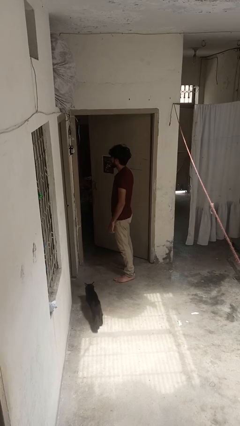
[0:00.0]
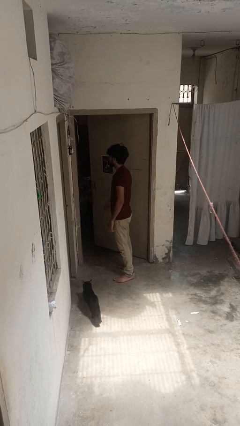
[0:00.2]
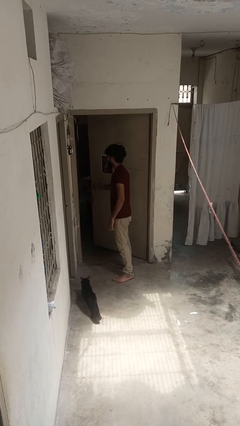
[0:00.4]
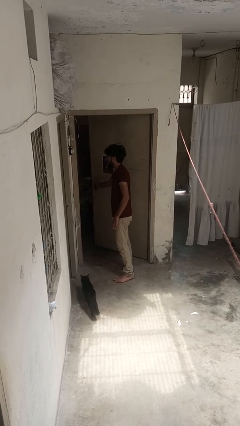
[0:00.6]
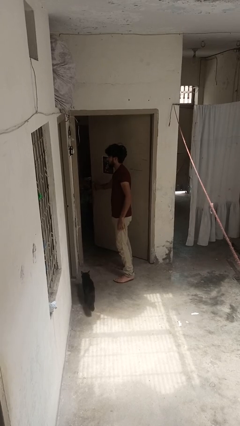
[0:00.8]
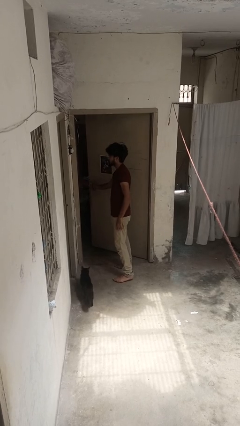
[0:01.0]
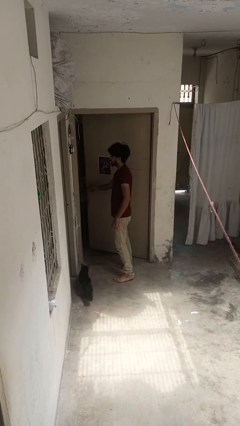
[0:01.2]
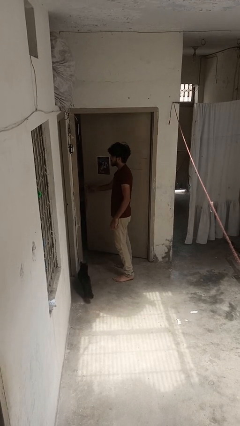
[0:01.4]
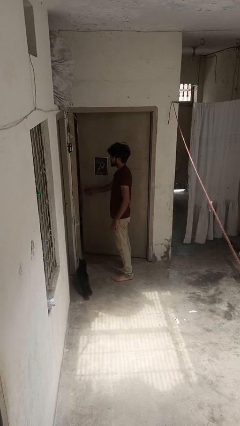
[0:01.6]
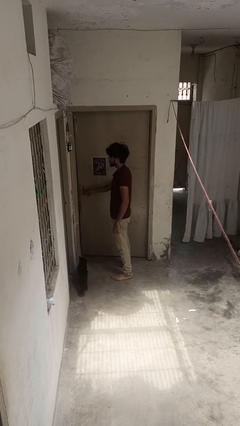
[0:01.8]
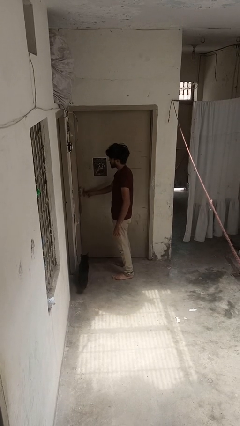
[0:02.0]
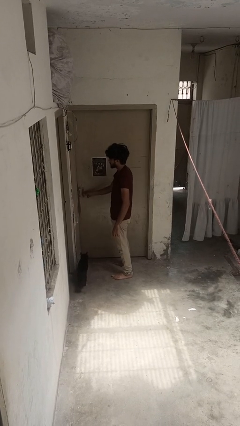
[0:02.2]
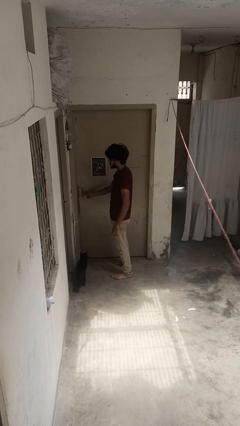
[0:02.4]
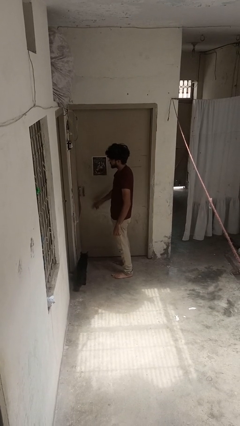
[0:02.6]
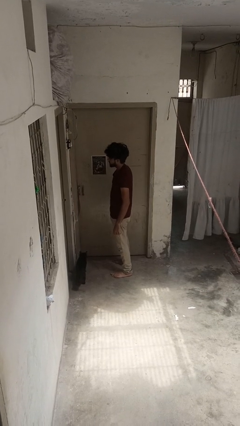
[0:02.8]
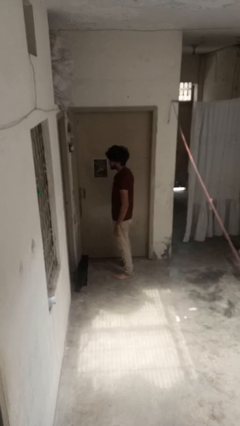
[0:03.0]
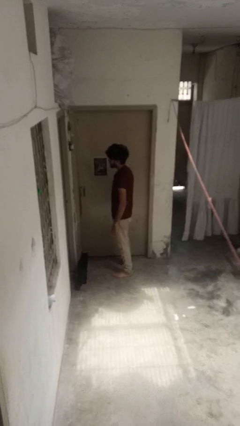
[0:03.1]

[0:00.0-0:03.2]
person closes door with hip

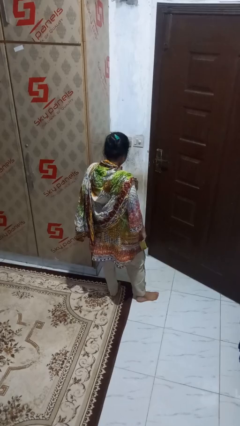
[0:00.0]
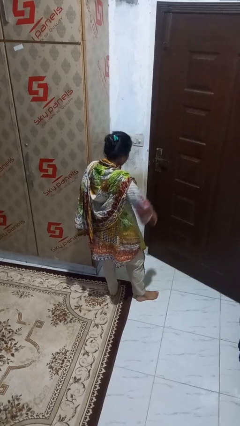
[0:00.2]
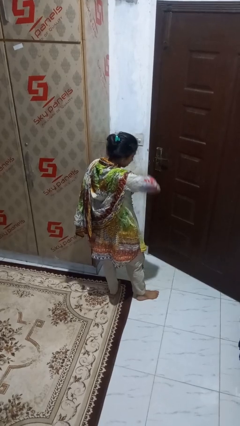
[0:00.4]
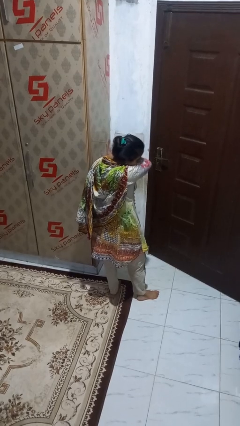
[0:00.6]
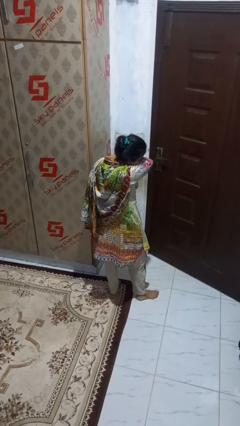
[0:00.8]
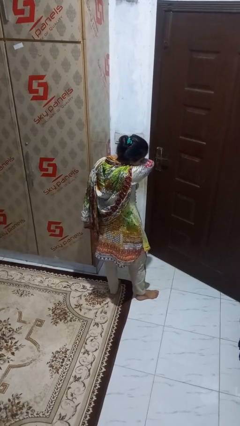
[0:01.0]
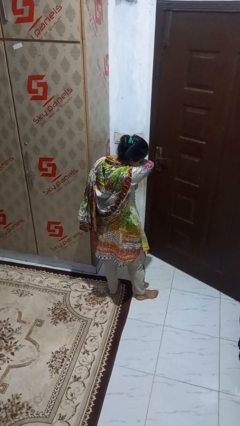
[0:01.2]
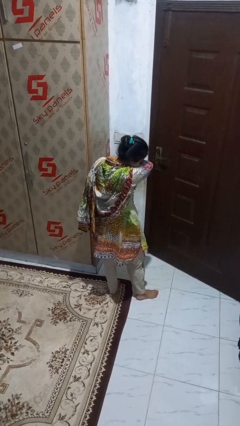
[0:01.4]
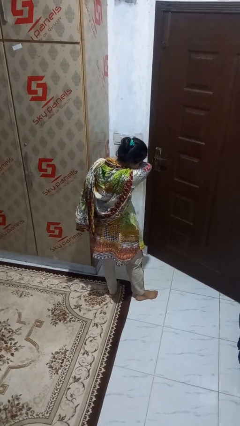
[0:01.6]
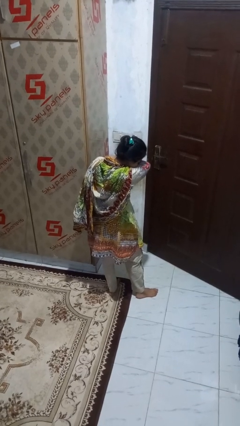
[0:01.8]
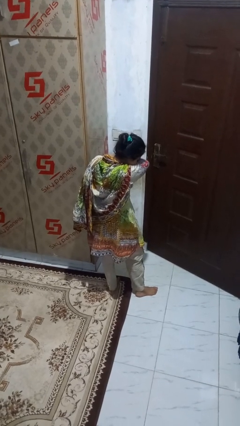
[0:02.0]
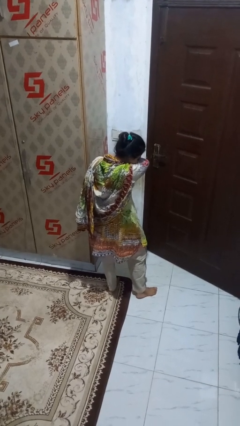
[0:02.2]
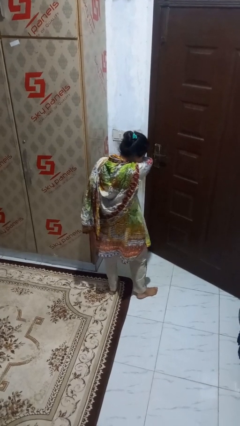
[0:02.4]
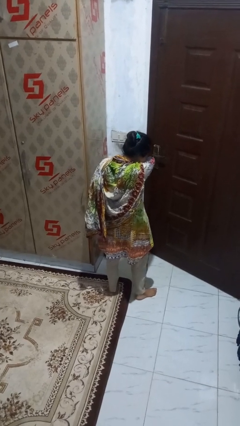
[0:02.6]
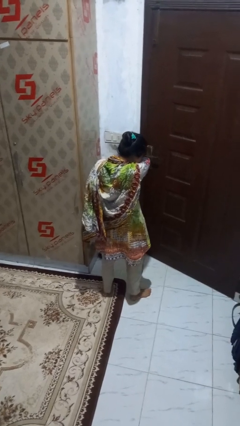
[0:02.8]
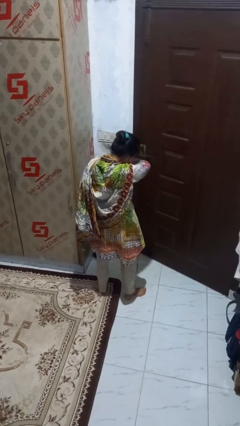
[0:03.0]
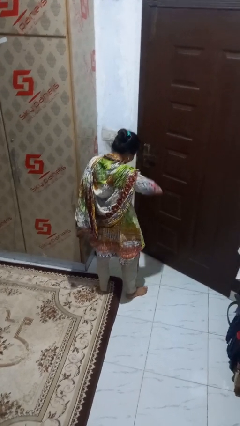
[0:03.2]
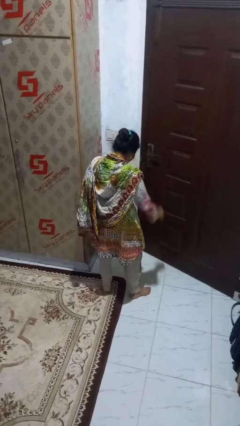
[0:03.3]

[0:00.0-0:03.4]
person sneezes into arm

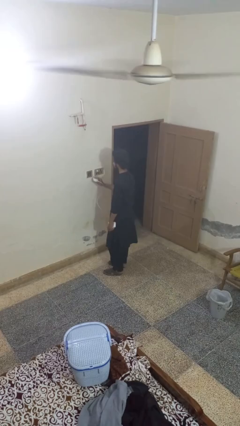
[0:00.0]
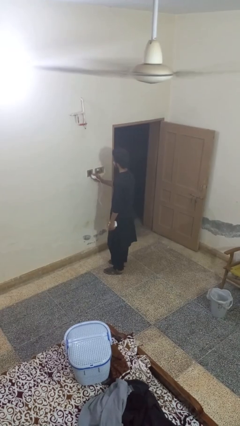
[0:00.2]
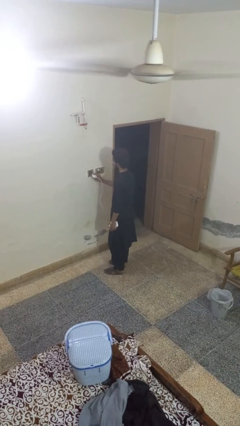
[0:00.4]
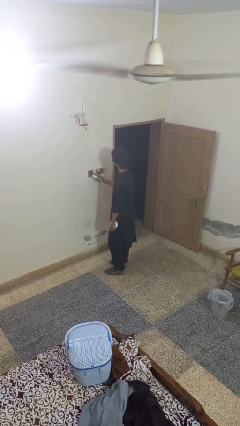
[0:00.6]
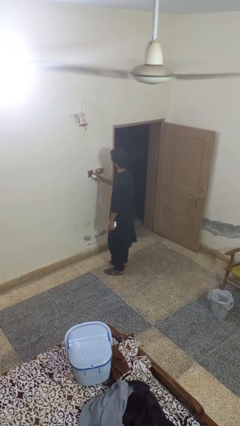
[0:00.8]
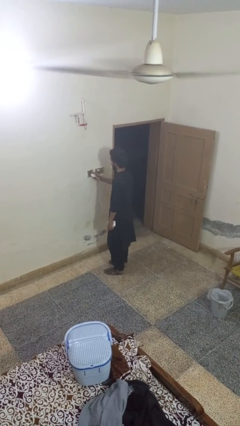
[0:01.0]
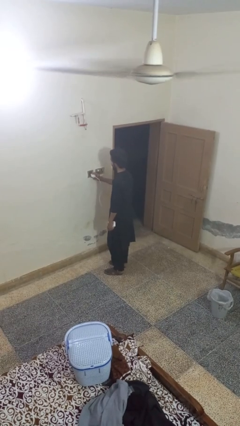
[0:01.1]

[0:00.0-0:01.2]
person plugs into electrical socket

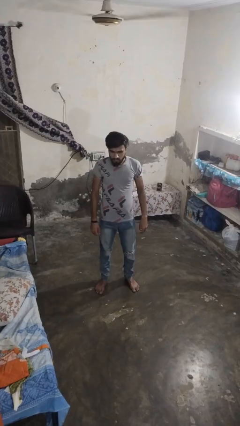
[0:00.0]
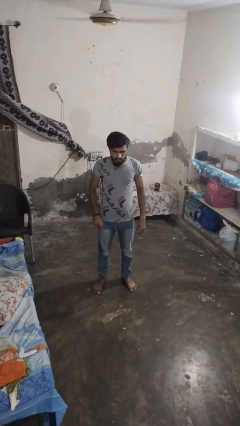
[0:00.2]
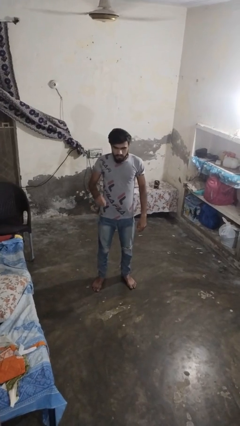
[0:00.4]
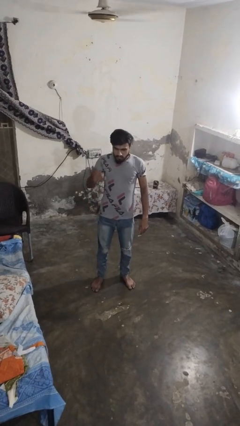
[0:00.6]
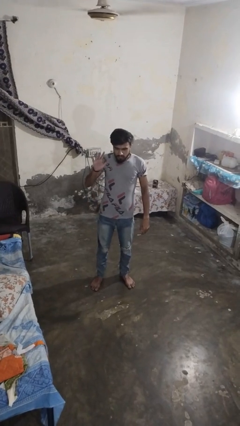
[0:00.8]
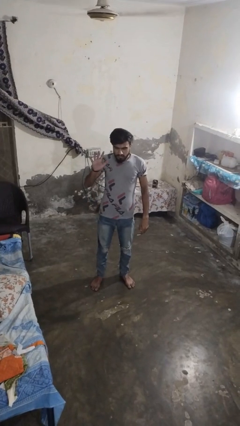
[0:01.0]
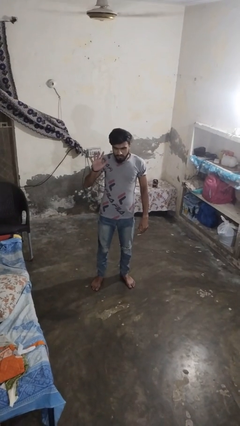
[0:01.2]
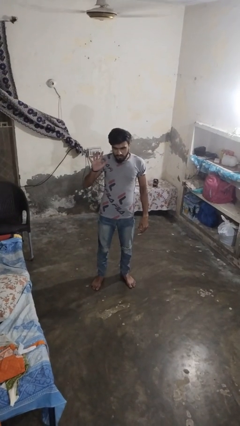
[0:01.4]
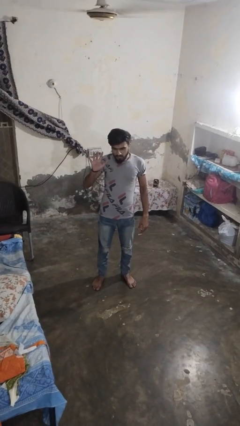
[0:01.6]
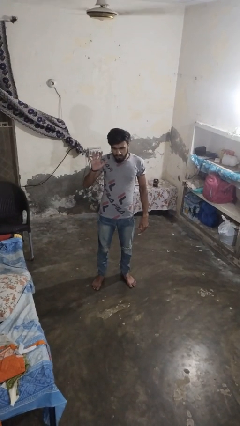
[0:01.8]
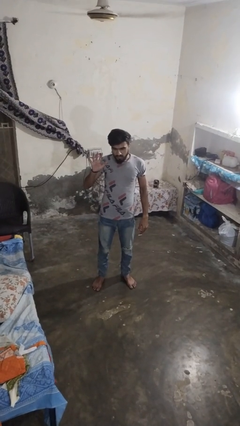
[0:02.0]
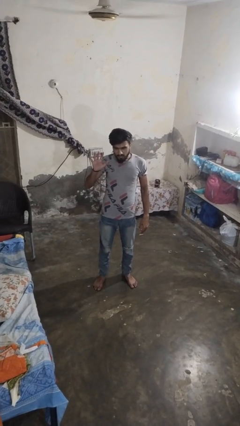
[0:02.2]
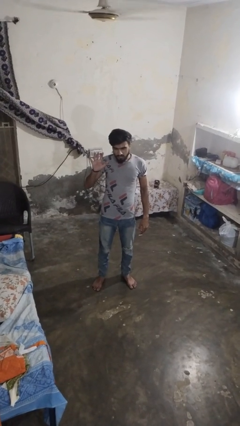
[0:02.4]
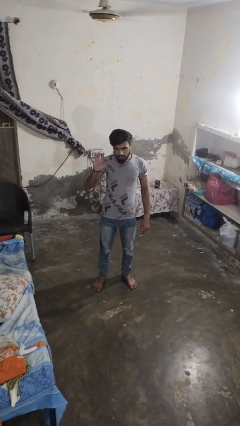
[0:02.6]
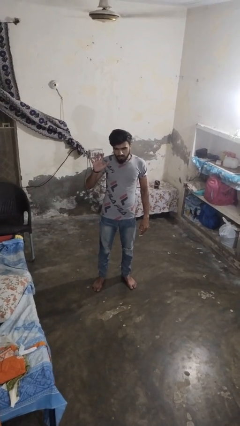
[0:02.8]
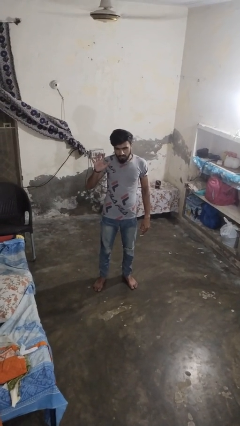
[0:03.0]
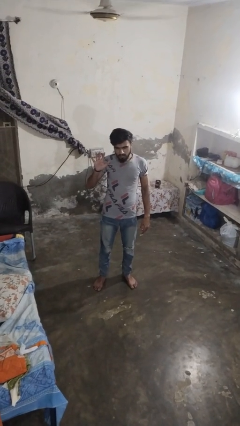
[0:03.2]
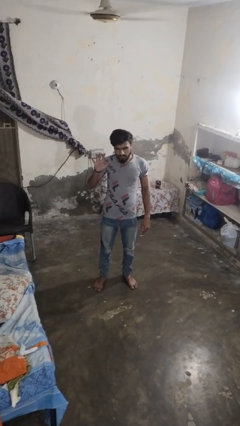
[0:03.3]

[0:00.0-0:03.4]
person gestures number five

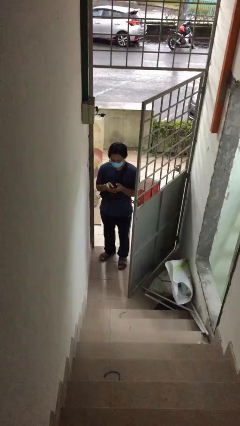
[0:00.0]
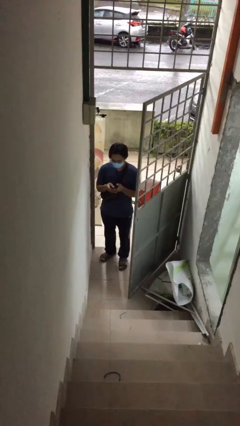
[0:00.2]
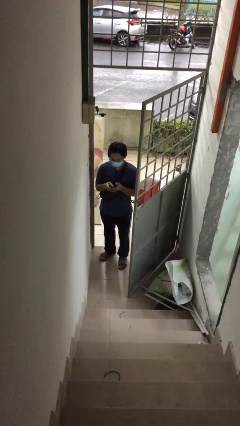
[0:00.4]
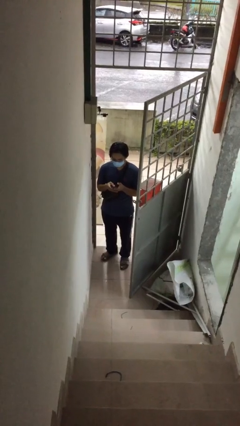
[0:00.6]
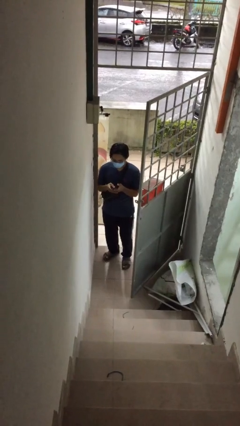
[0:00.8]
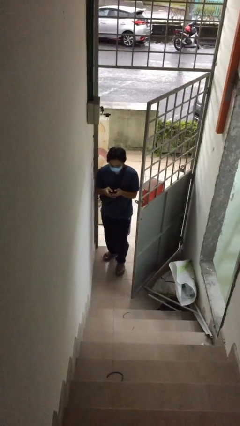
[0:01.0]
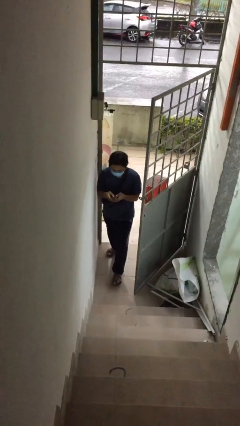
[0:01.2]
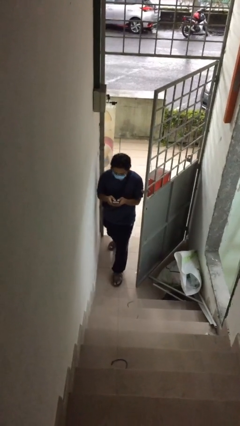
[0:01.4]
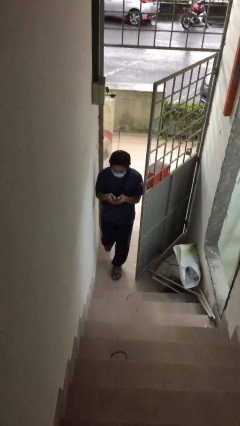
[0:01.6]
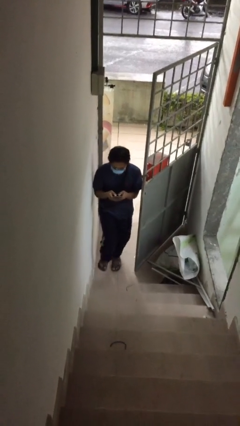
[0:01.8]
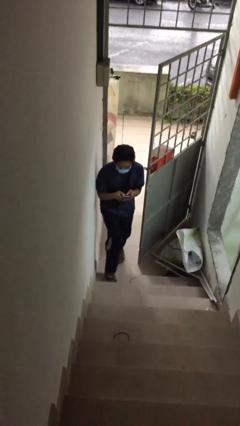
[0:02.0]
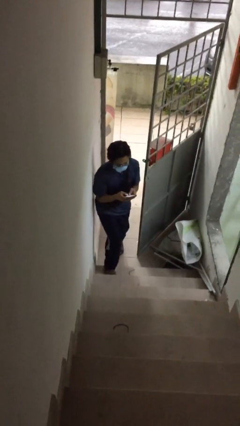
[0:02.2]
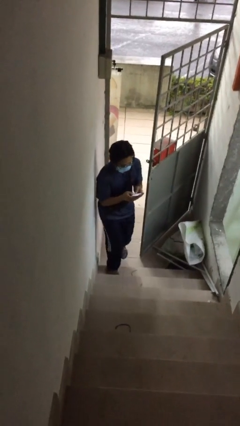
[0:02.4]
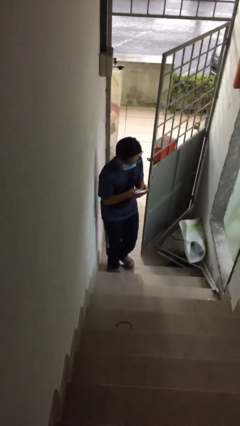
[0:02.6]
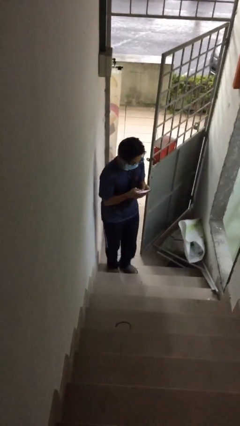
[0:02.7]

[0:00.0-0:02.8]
person enters scene through structure

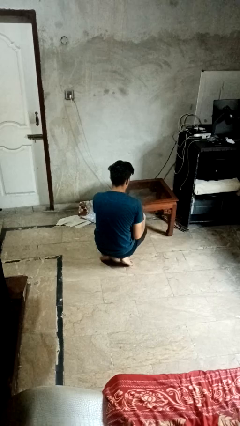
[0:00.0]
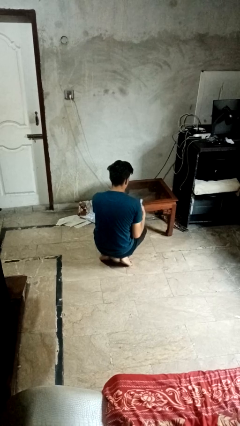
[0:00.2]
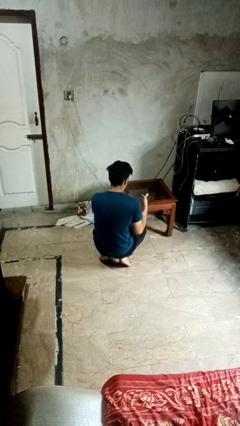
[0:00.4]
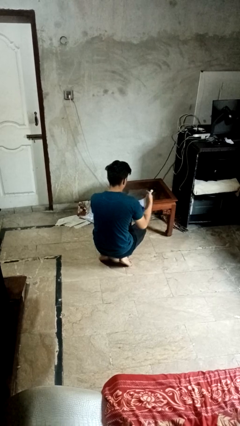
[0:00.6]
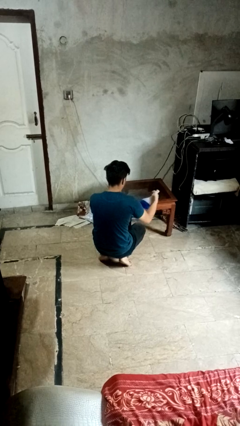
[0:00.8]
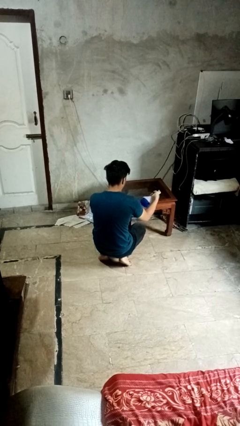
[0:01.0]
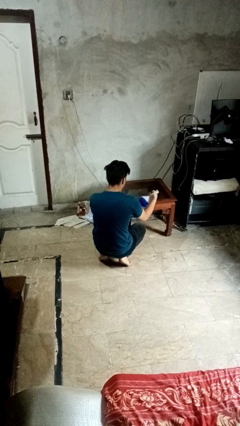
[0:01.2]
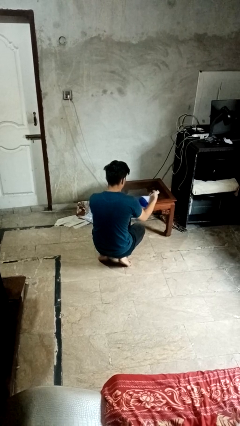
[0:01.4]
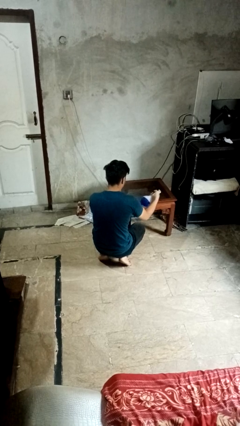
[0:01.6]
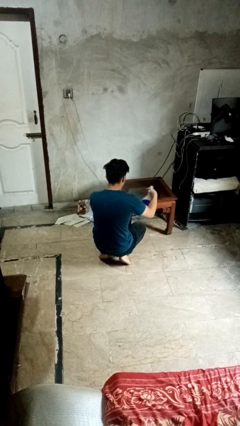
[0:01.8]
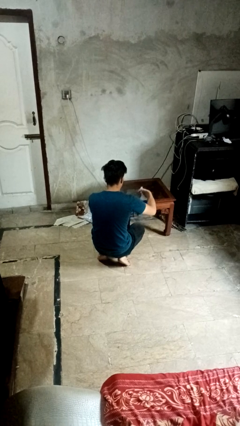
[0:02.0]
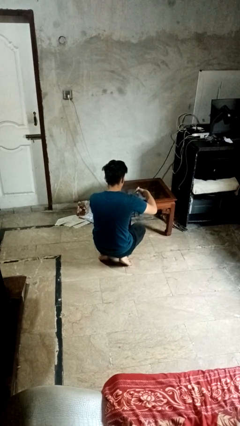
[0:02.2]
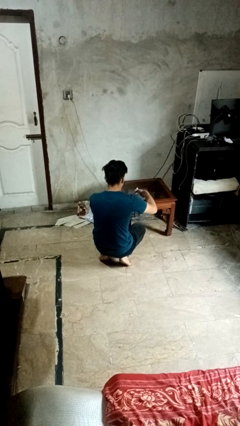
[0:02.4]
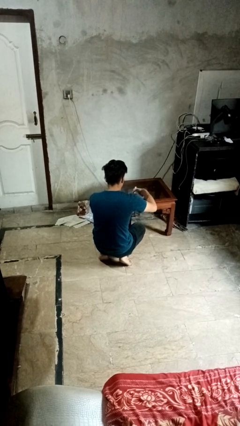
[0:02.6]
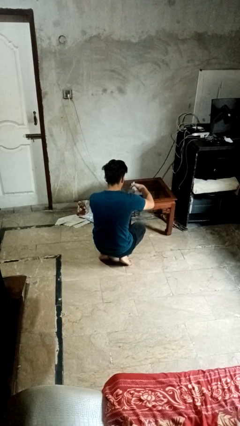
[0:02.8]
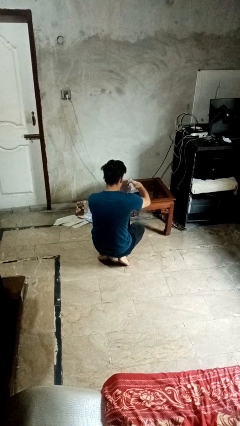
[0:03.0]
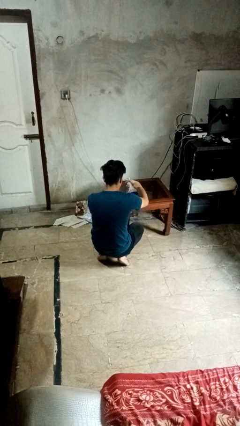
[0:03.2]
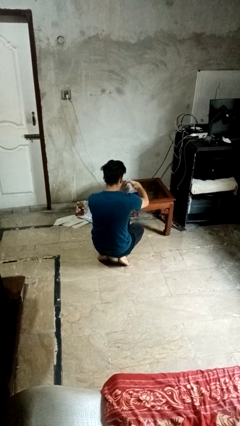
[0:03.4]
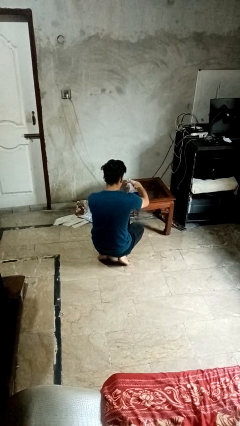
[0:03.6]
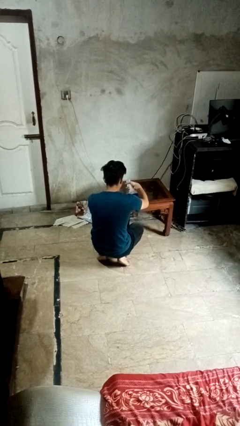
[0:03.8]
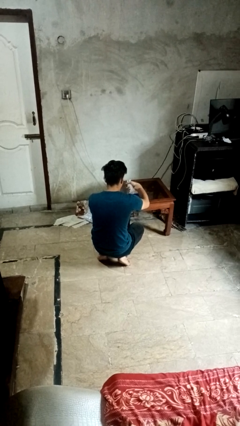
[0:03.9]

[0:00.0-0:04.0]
person sprays from bottle
